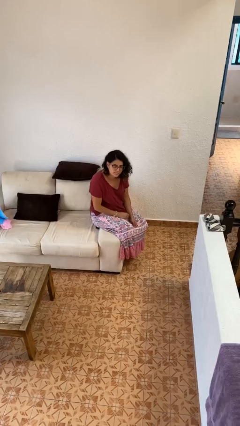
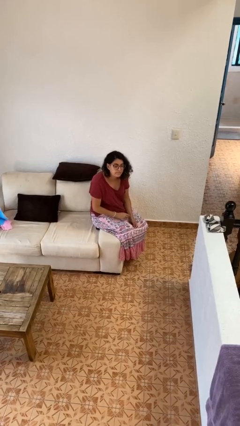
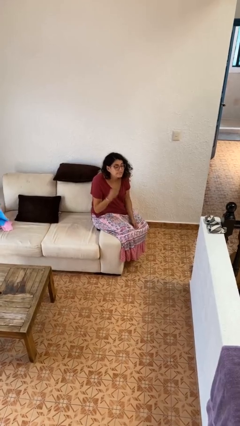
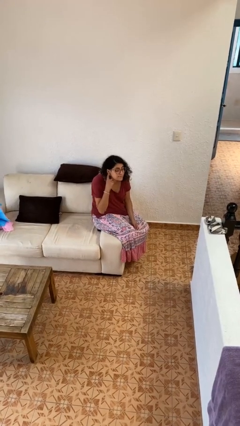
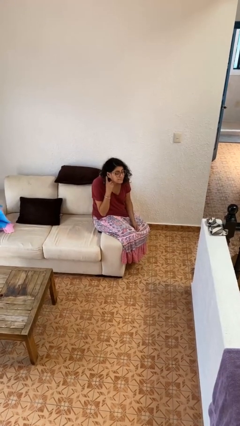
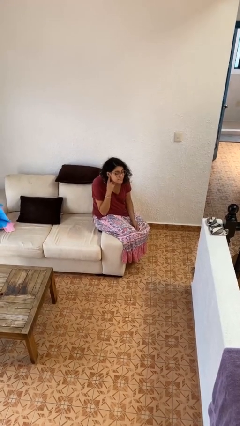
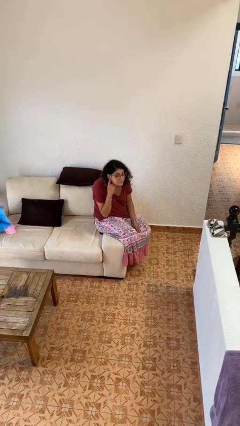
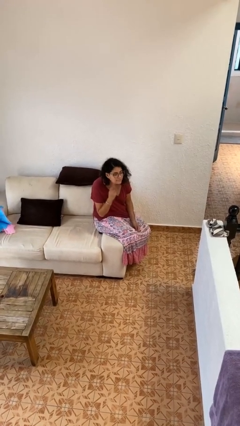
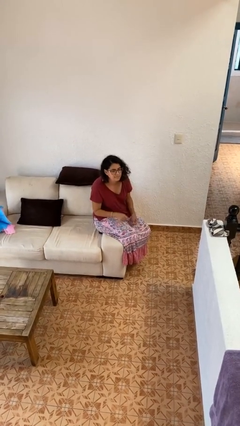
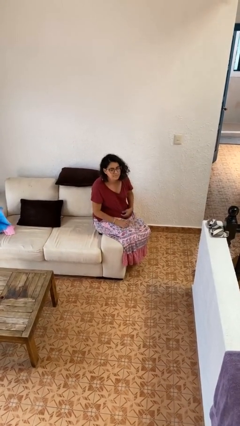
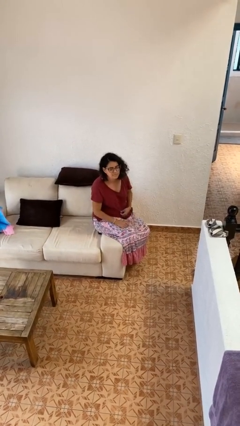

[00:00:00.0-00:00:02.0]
person gestures listen closely

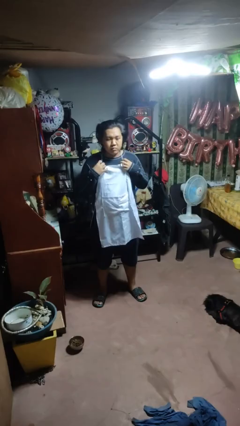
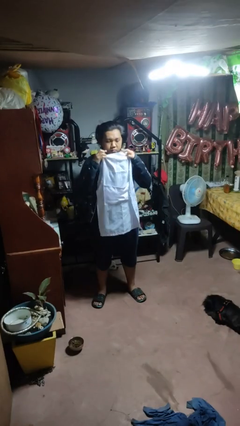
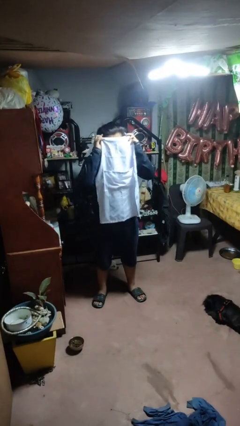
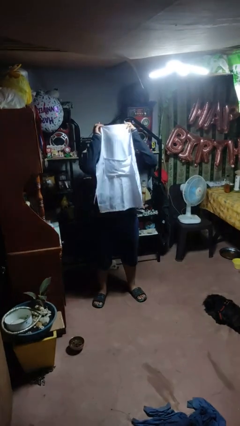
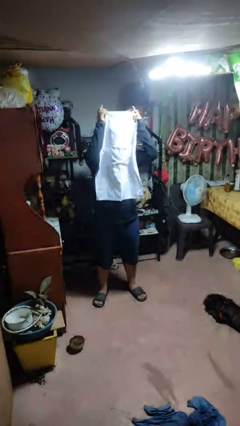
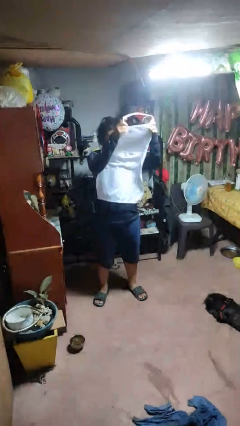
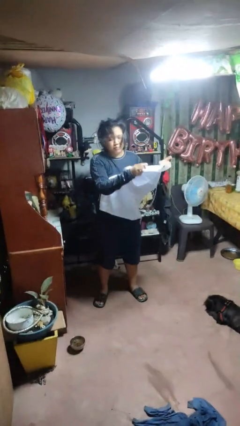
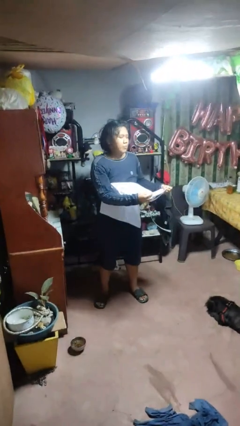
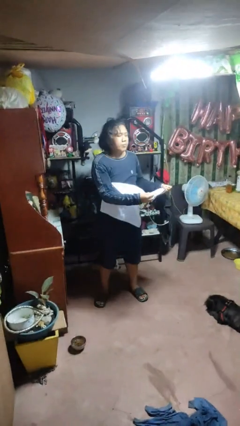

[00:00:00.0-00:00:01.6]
person takes off apron

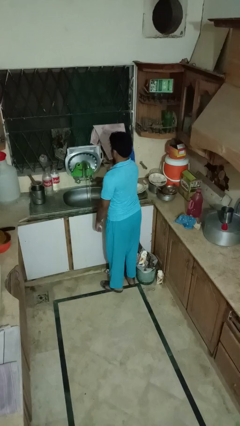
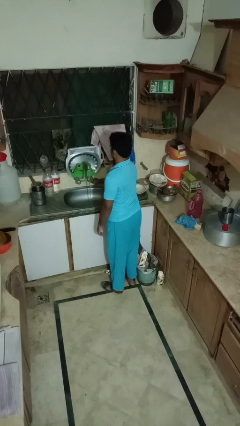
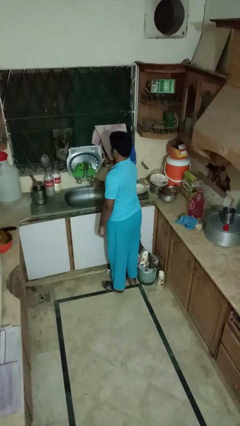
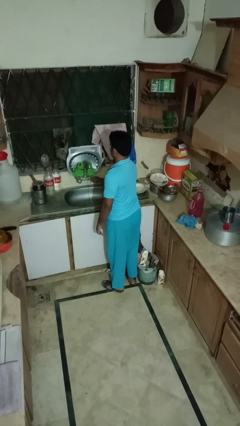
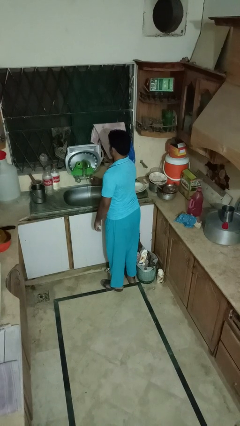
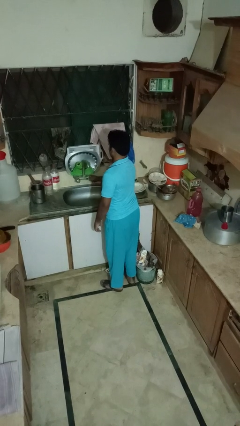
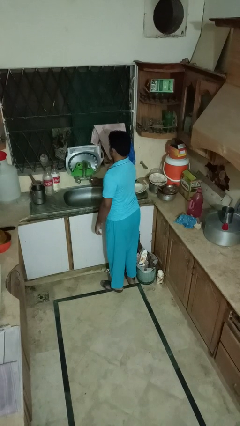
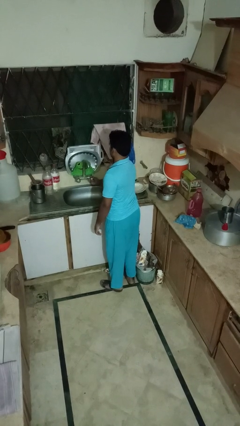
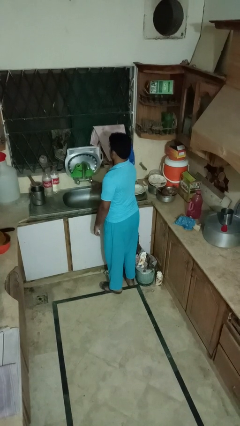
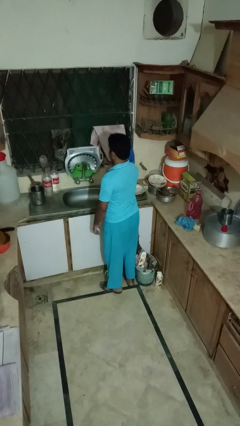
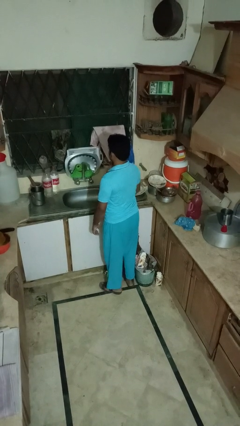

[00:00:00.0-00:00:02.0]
person turns off faucet

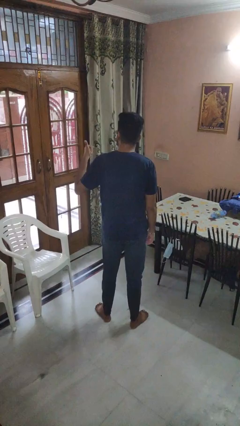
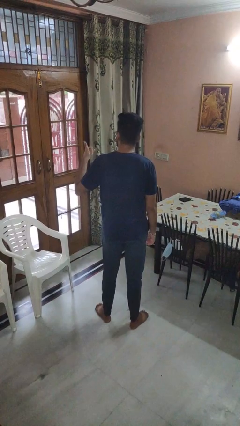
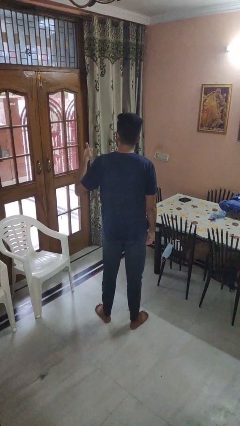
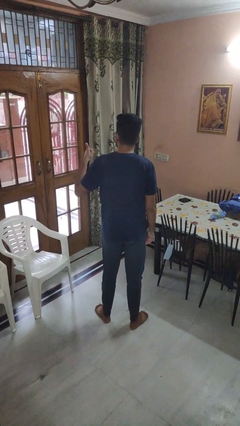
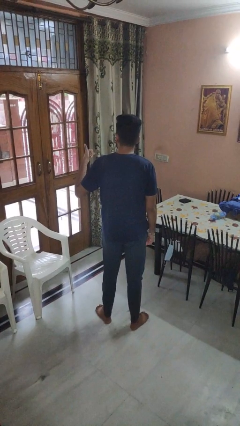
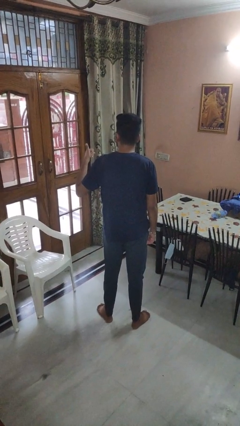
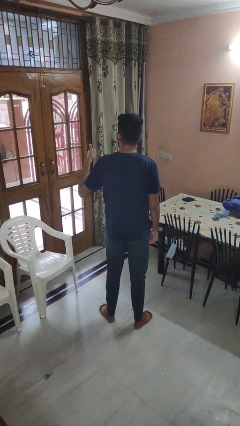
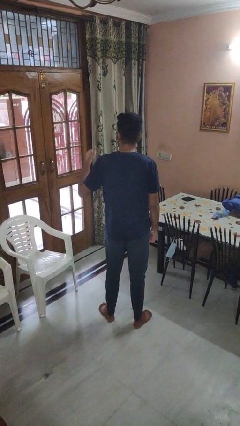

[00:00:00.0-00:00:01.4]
person gestures hang loose

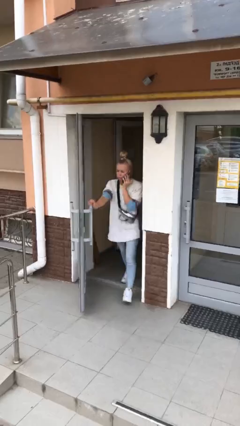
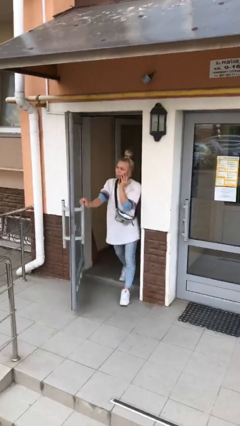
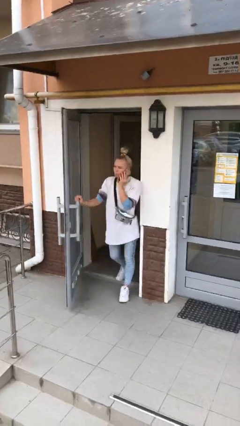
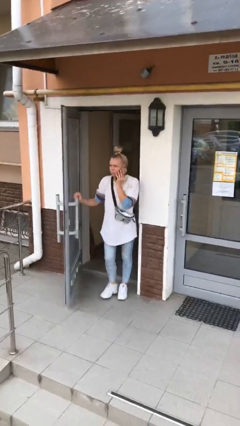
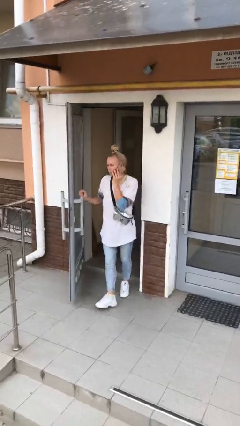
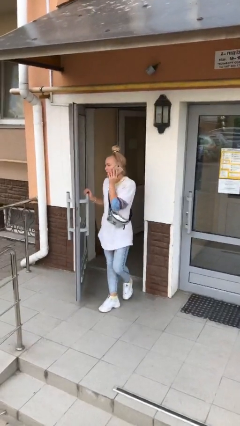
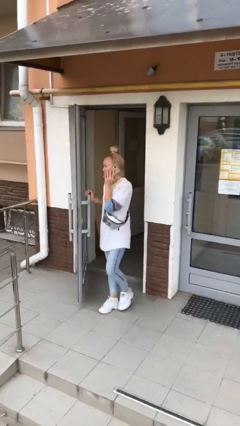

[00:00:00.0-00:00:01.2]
person enters scene through structure

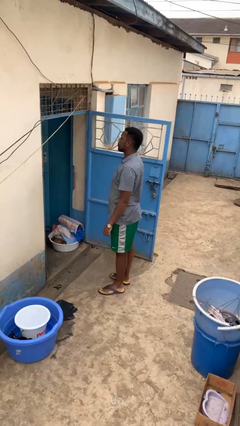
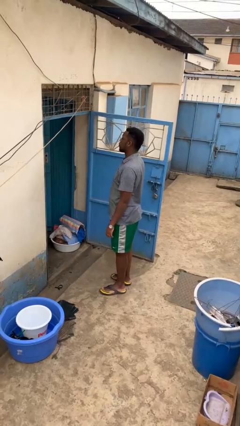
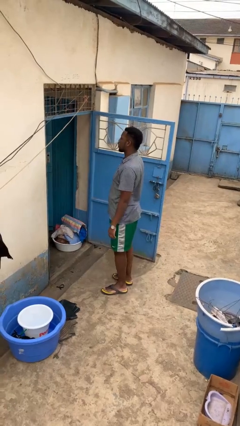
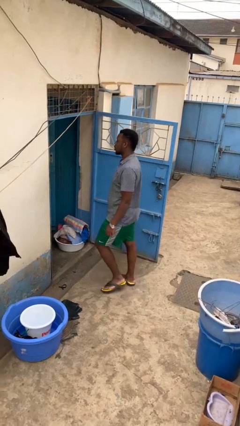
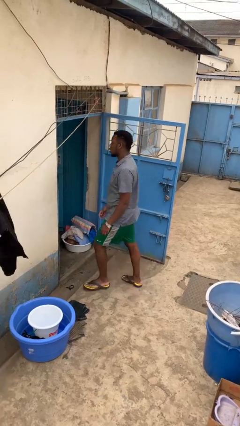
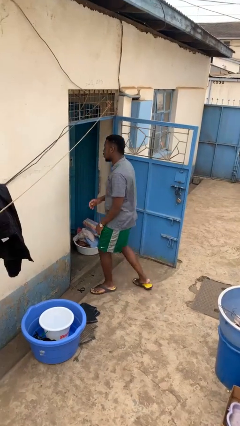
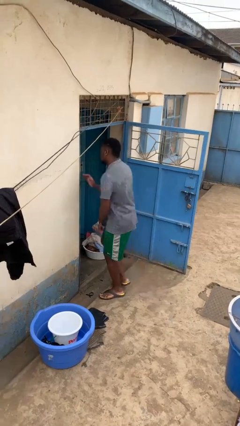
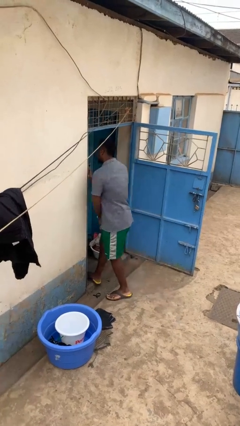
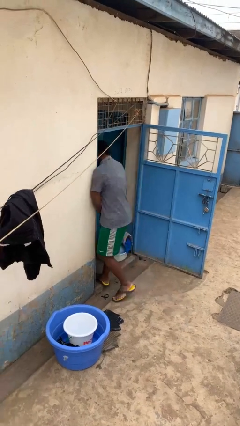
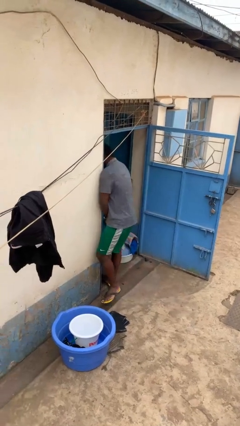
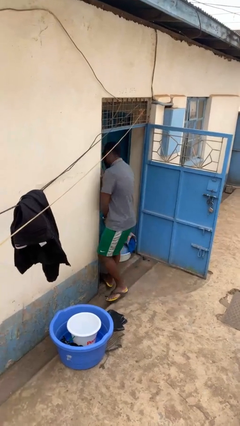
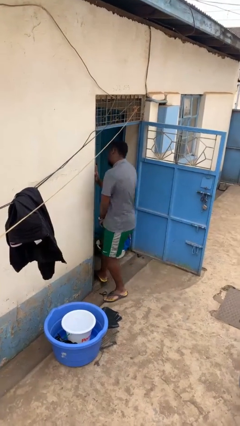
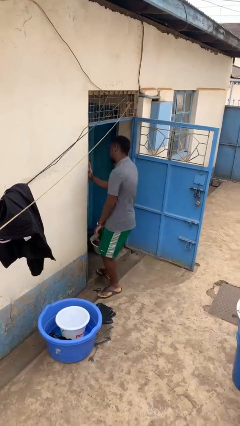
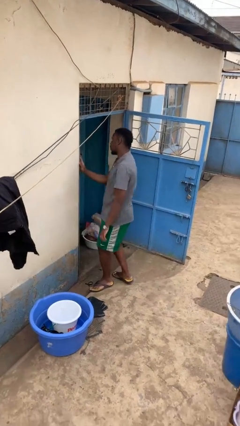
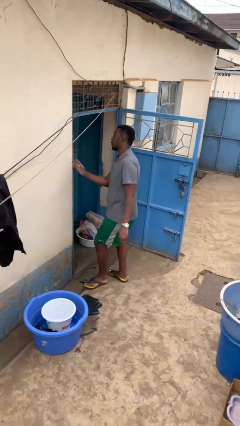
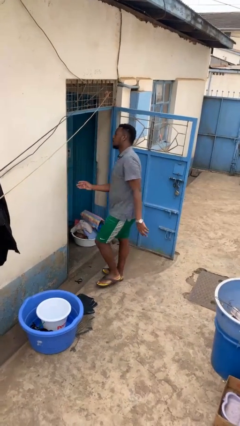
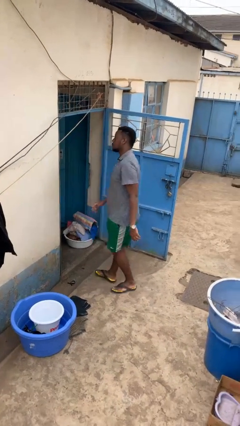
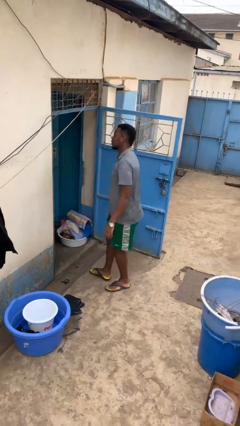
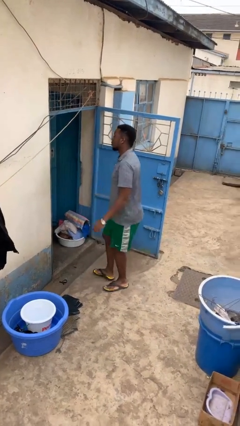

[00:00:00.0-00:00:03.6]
person bumps into wall

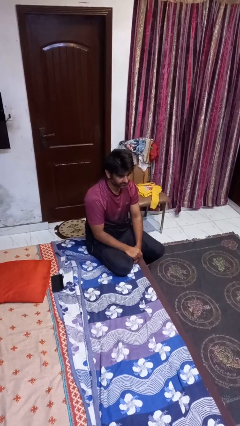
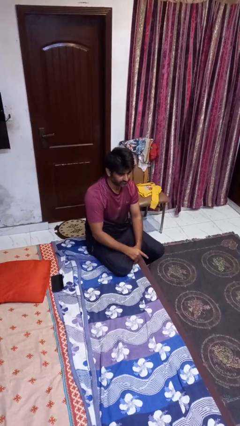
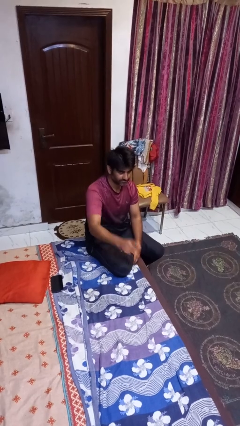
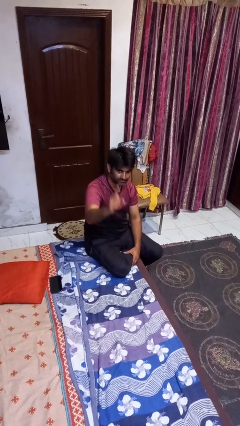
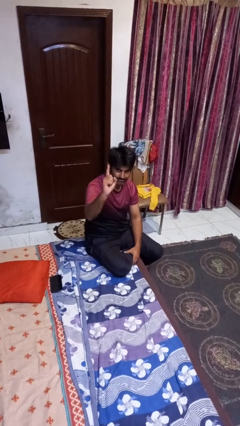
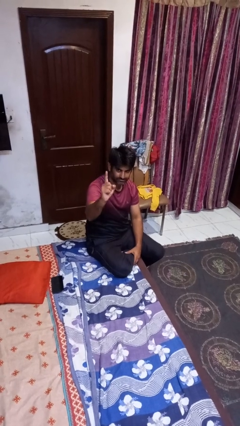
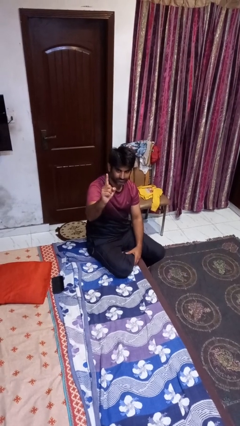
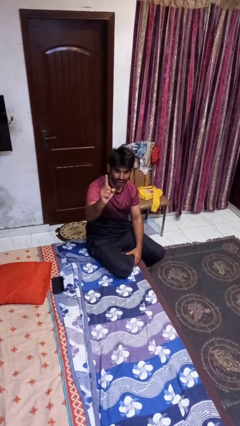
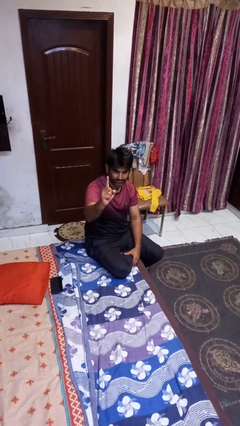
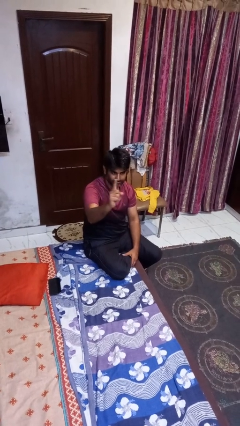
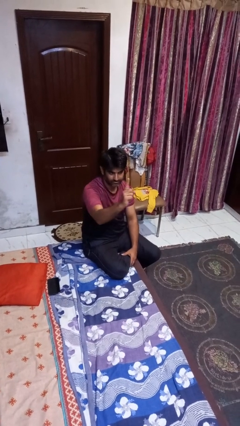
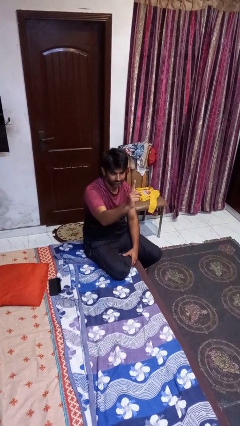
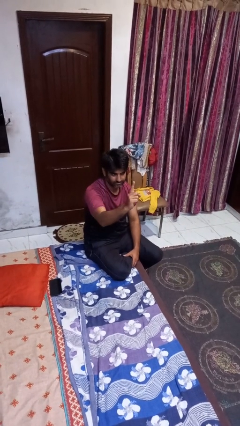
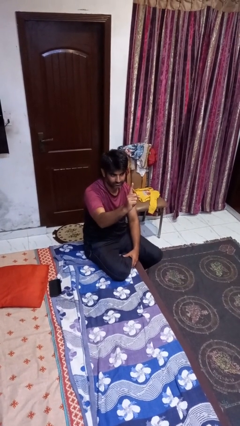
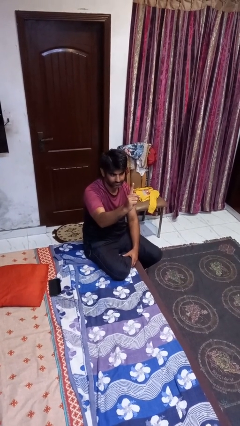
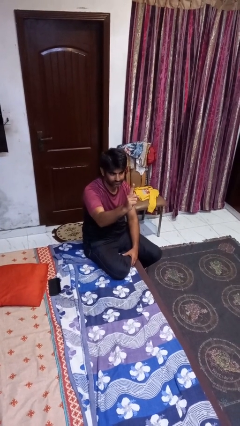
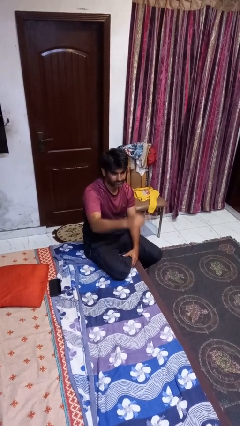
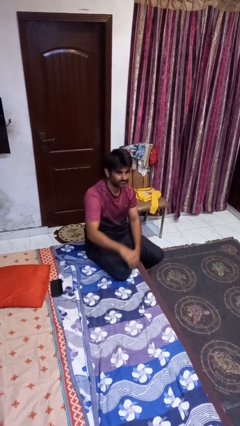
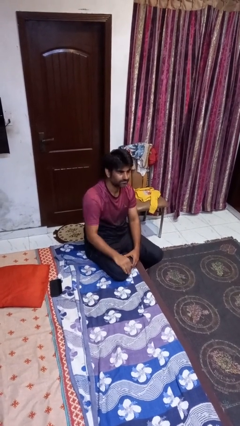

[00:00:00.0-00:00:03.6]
person gestures number one

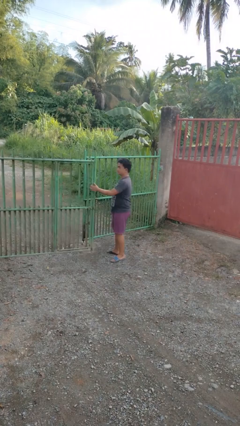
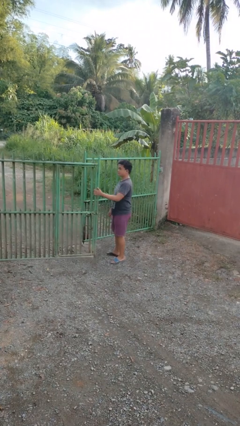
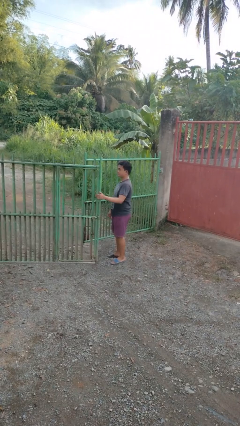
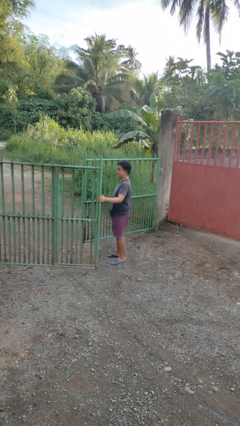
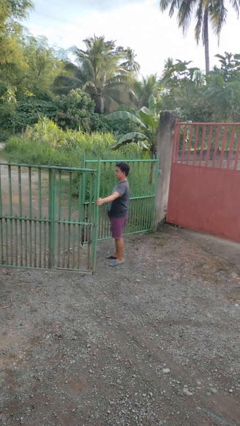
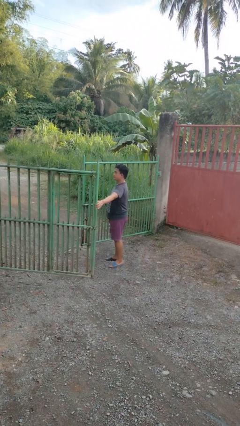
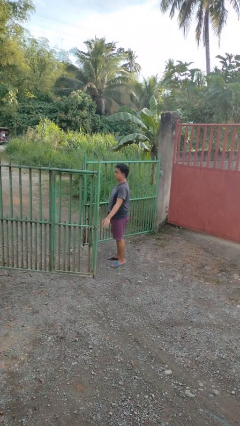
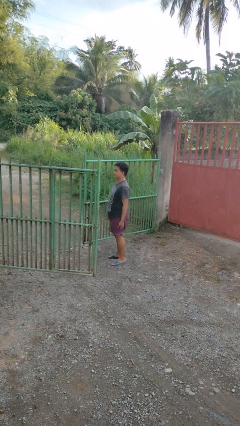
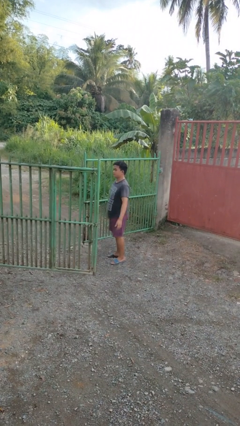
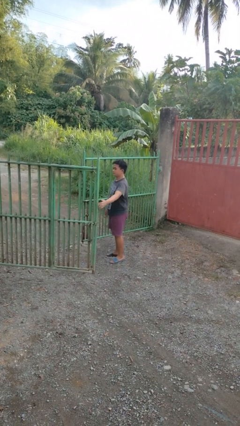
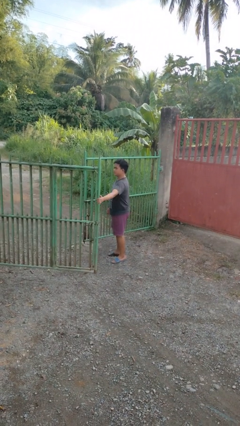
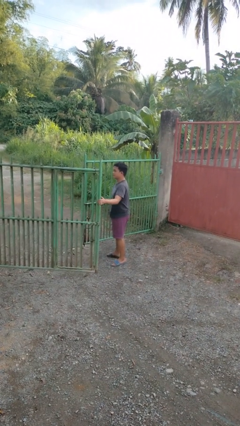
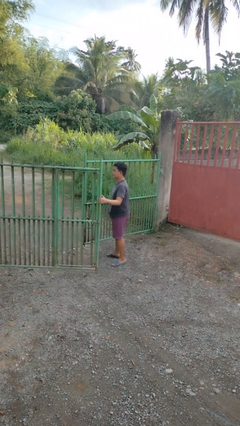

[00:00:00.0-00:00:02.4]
person opens gate
